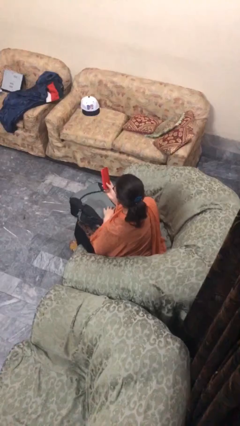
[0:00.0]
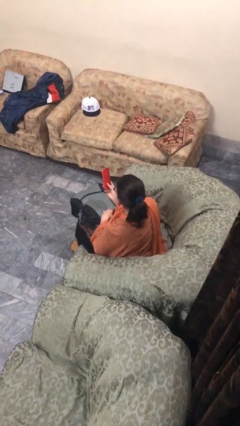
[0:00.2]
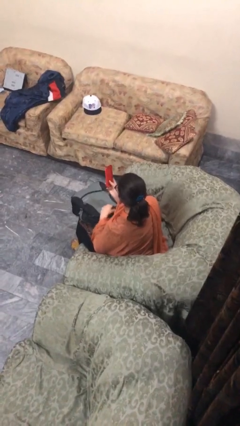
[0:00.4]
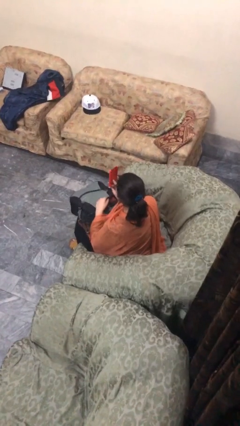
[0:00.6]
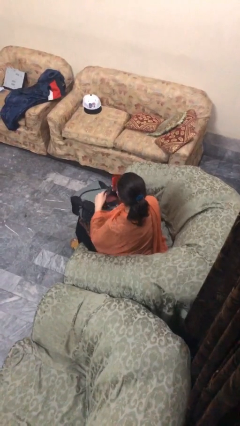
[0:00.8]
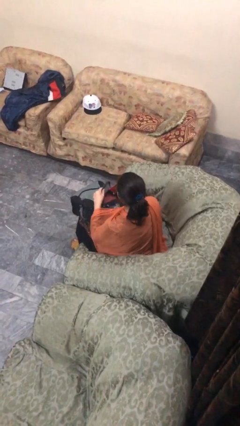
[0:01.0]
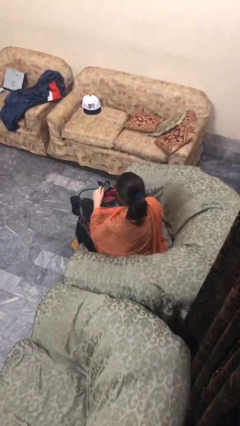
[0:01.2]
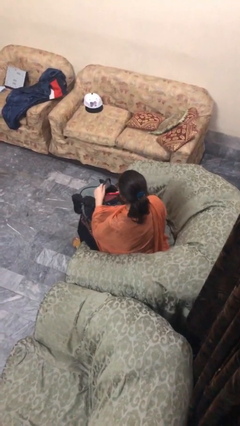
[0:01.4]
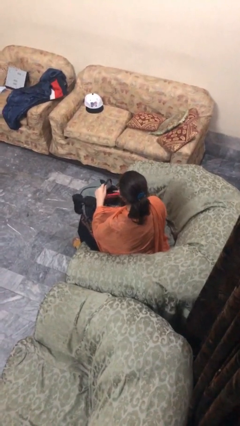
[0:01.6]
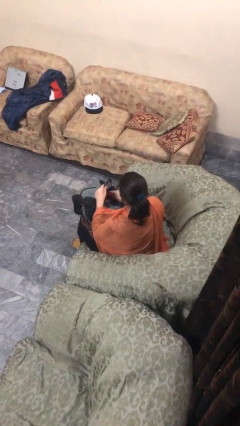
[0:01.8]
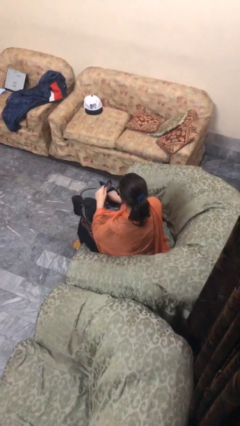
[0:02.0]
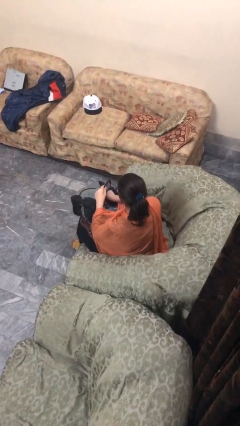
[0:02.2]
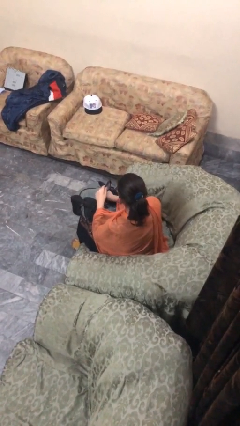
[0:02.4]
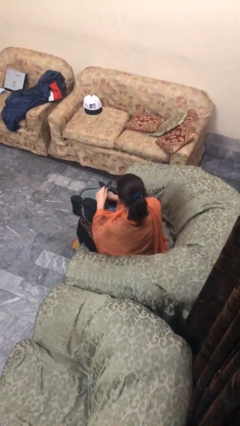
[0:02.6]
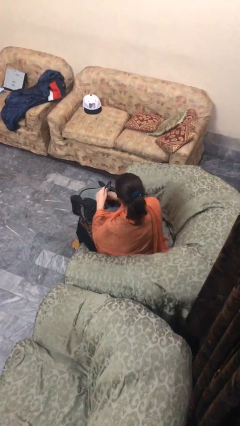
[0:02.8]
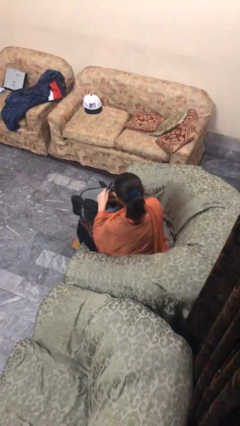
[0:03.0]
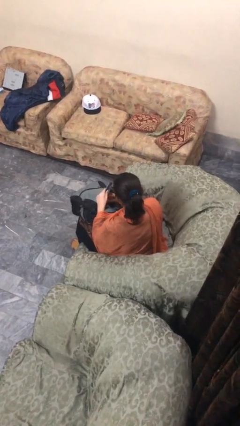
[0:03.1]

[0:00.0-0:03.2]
person puts object into backpack

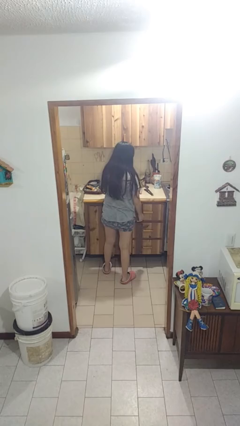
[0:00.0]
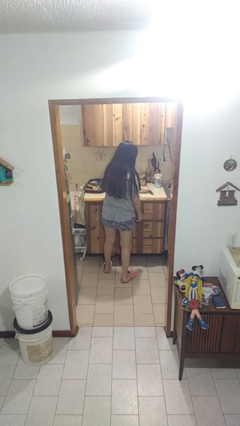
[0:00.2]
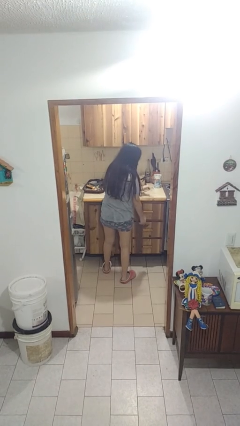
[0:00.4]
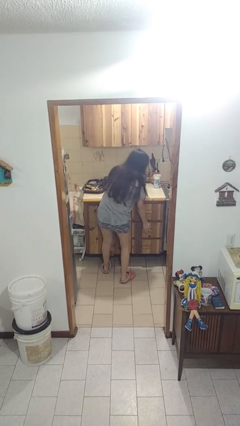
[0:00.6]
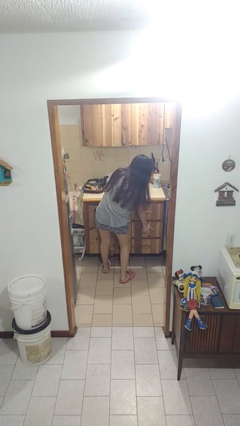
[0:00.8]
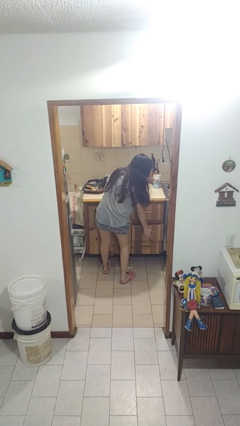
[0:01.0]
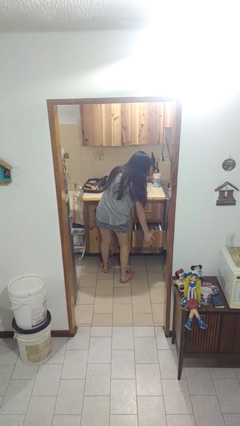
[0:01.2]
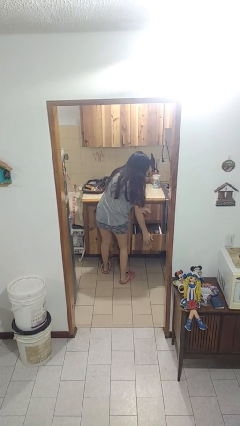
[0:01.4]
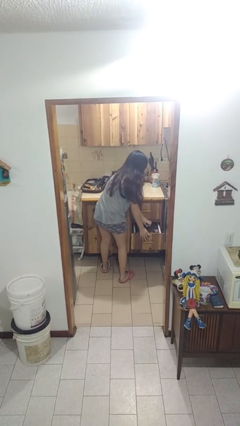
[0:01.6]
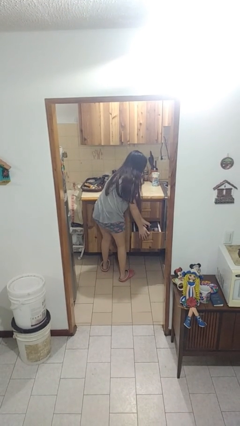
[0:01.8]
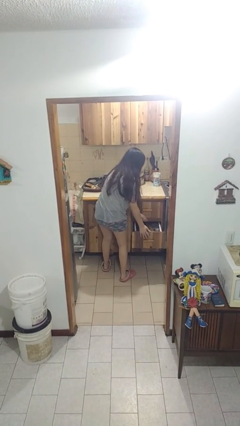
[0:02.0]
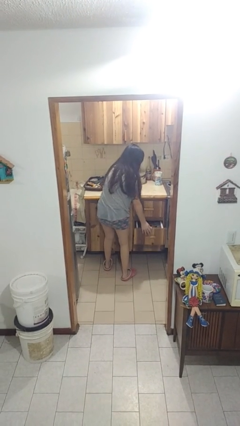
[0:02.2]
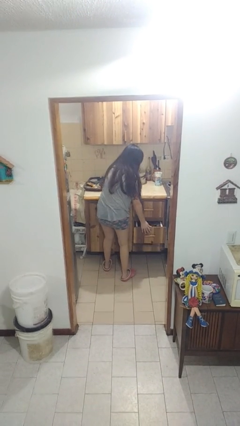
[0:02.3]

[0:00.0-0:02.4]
person puts object into kitchen drawer

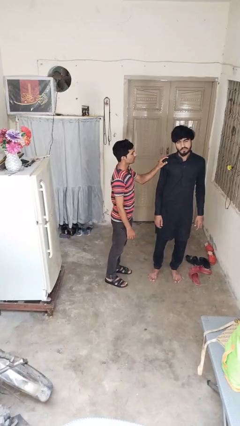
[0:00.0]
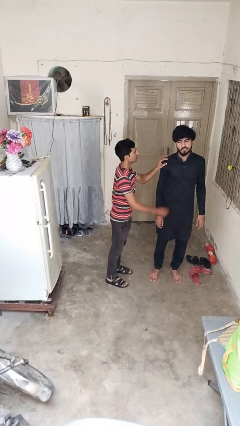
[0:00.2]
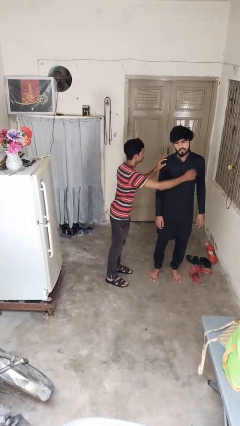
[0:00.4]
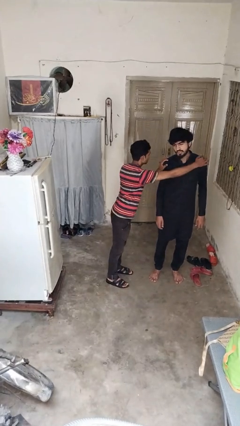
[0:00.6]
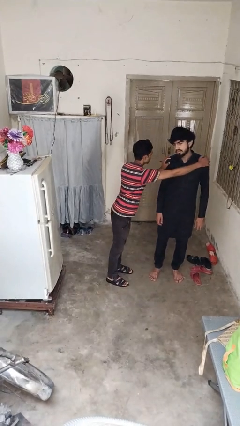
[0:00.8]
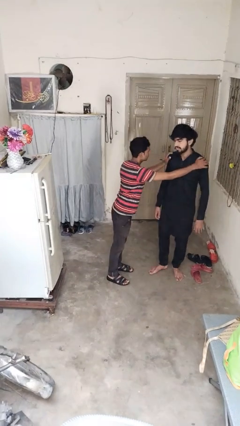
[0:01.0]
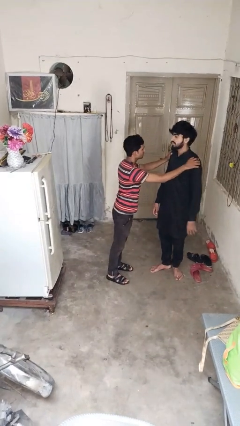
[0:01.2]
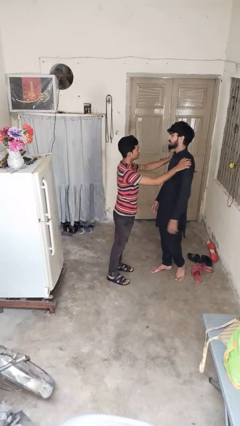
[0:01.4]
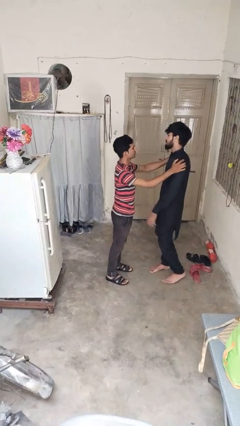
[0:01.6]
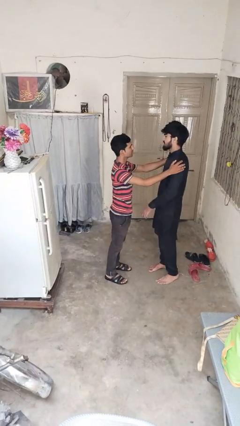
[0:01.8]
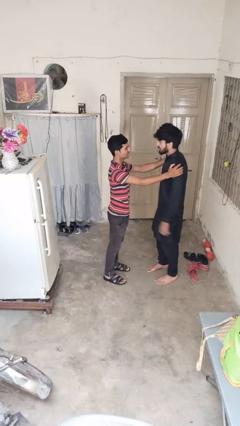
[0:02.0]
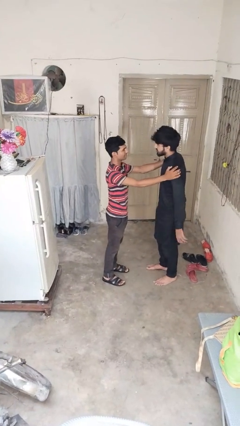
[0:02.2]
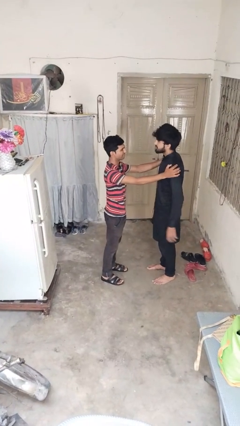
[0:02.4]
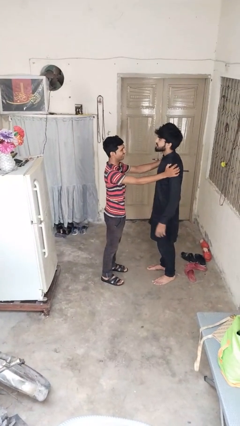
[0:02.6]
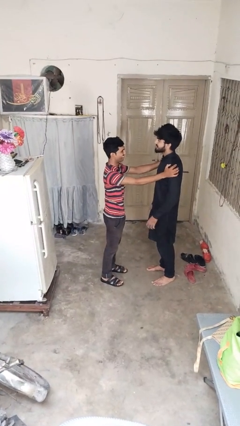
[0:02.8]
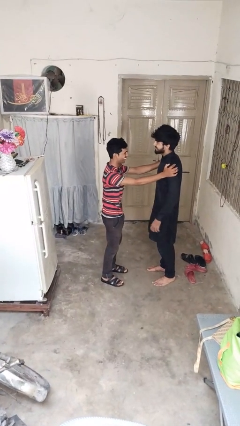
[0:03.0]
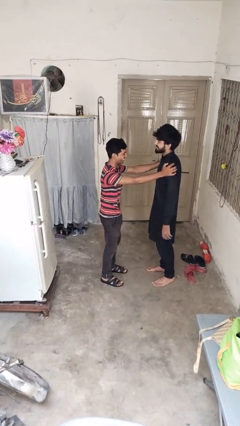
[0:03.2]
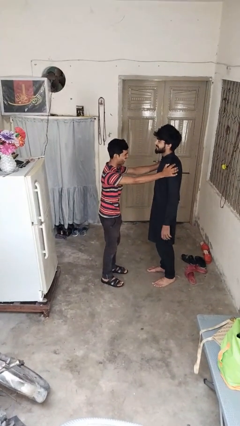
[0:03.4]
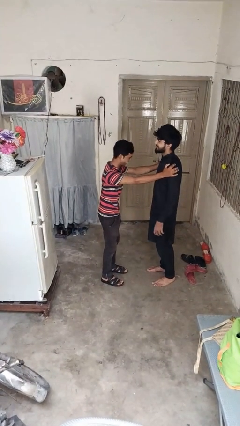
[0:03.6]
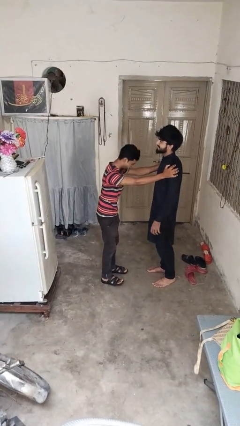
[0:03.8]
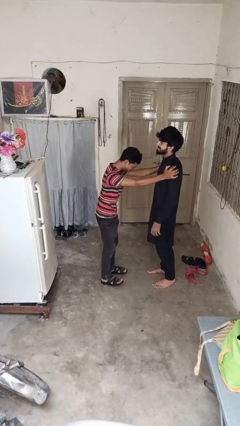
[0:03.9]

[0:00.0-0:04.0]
person spins person around

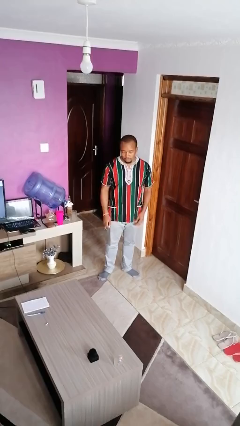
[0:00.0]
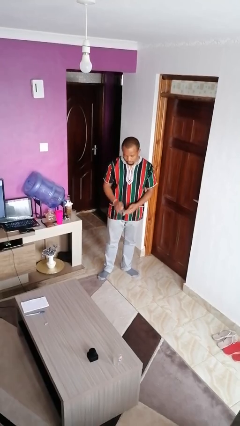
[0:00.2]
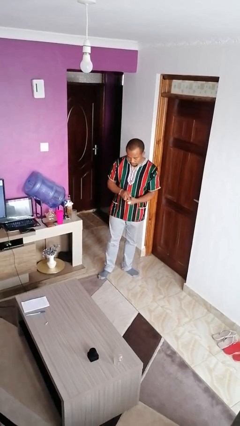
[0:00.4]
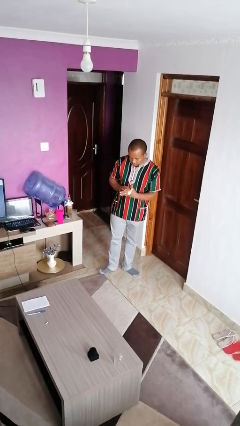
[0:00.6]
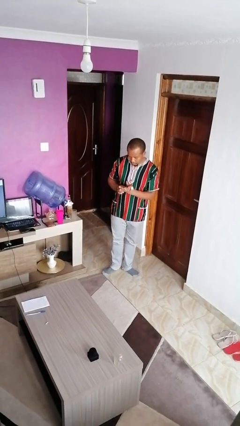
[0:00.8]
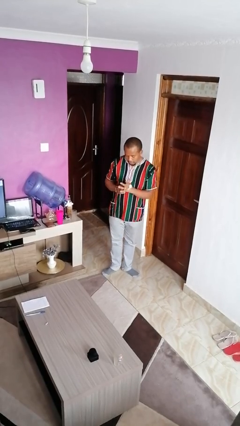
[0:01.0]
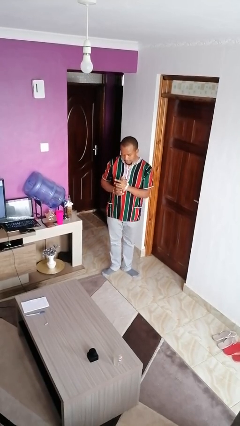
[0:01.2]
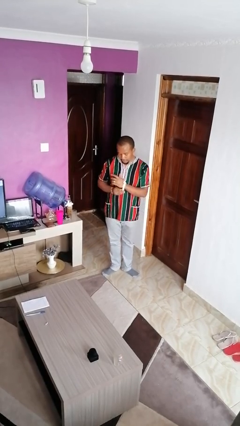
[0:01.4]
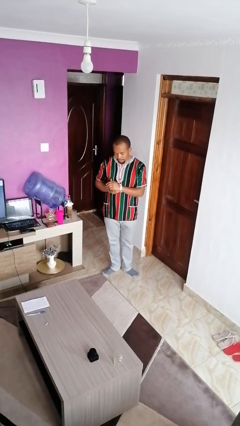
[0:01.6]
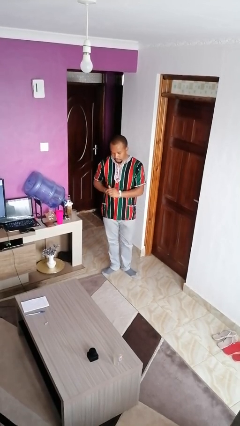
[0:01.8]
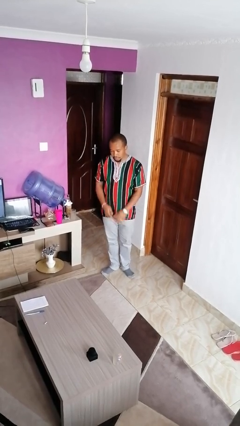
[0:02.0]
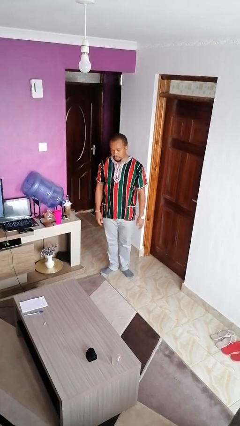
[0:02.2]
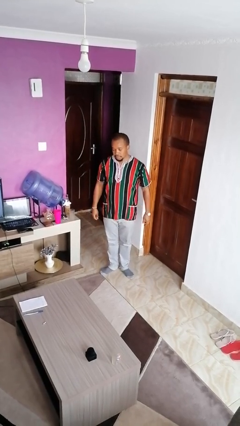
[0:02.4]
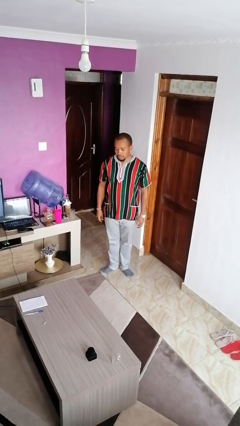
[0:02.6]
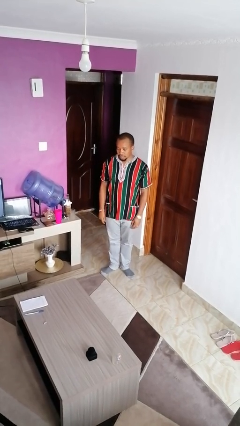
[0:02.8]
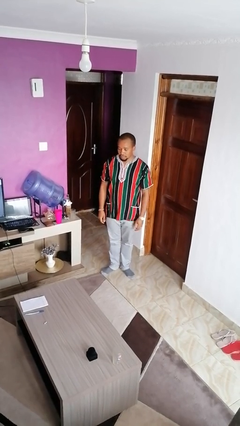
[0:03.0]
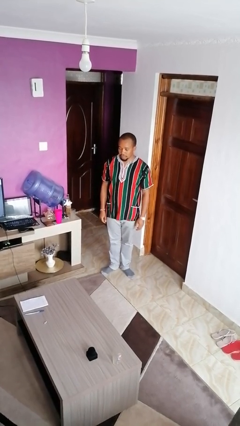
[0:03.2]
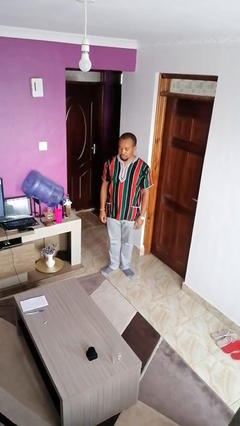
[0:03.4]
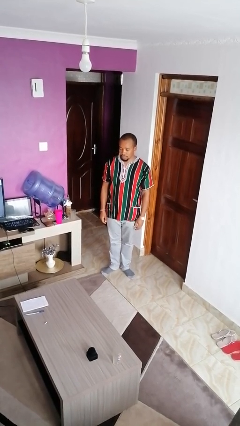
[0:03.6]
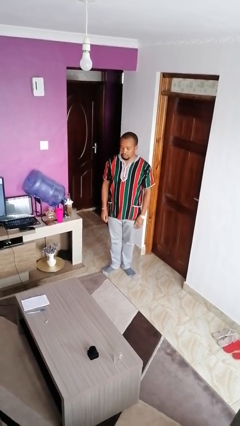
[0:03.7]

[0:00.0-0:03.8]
person puts on wristwatch

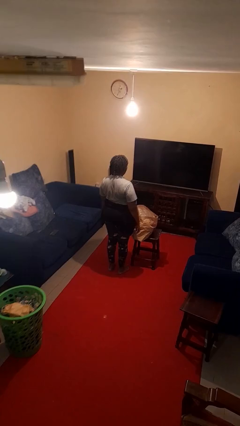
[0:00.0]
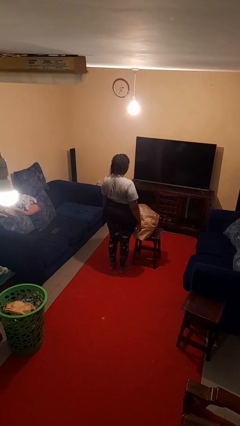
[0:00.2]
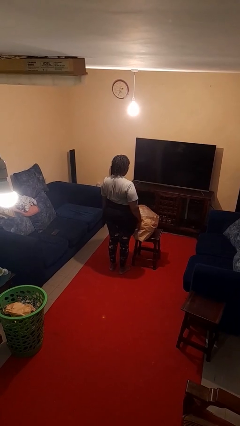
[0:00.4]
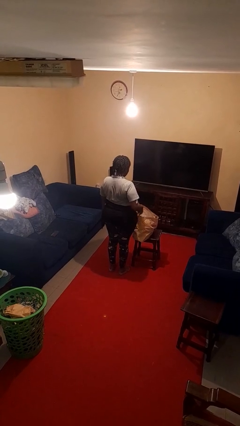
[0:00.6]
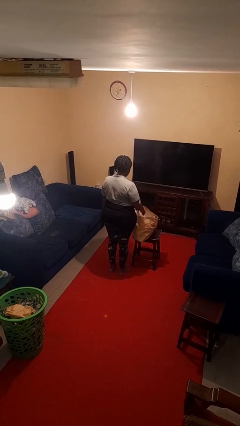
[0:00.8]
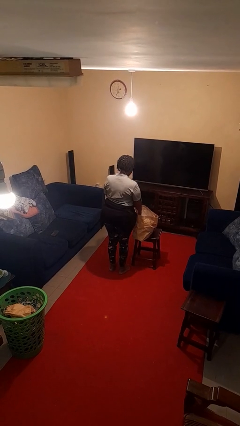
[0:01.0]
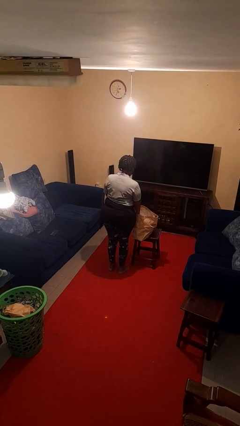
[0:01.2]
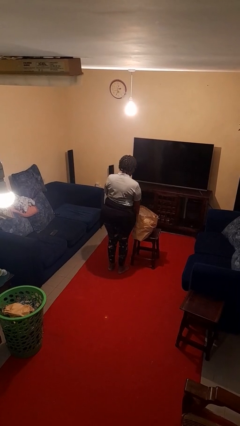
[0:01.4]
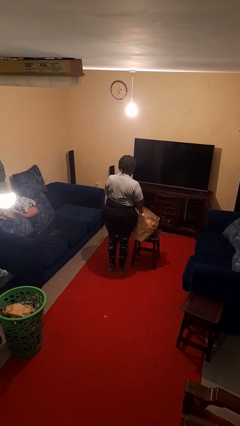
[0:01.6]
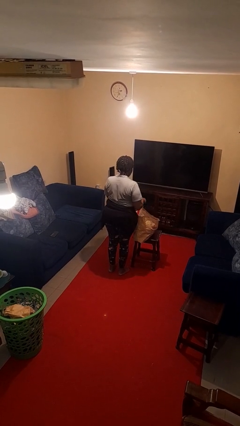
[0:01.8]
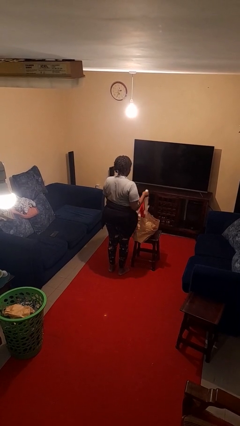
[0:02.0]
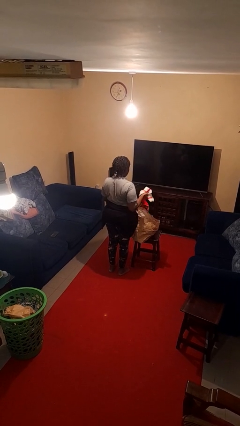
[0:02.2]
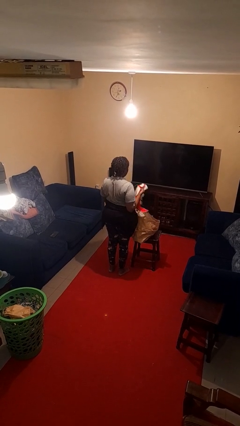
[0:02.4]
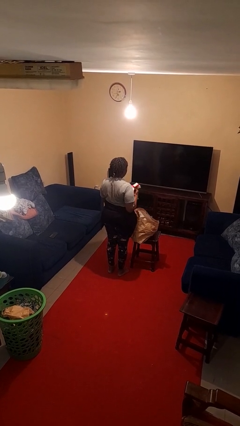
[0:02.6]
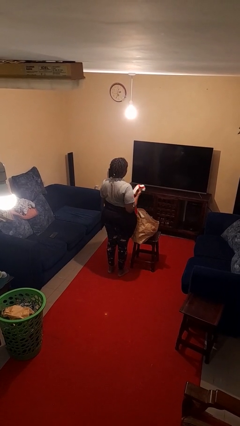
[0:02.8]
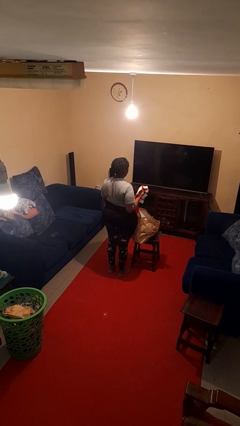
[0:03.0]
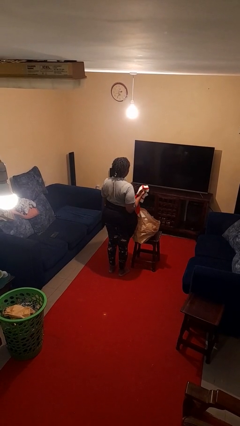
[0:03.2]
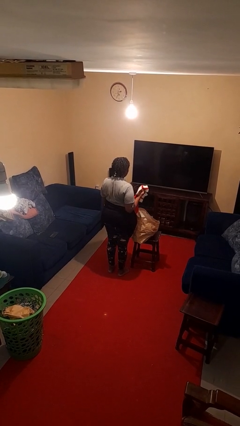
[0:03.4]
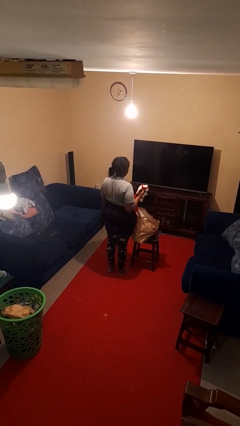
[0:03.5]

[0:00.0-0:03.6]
person takes object from bag

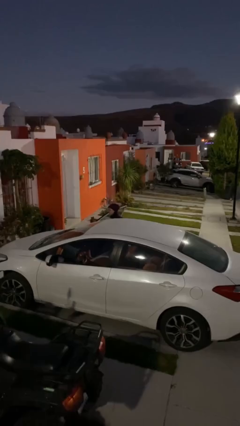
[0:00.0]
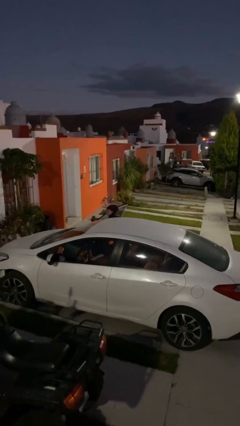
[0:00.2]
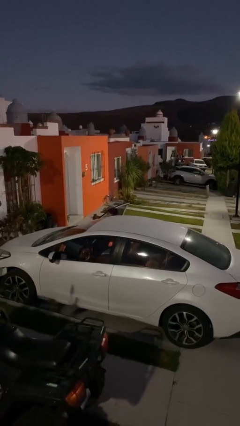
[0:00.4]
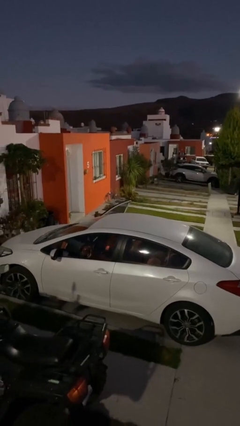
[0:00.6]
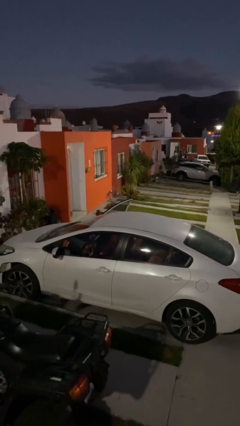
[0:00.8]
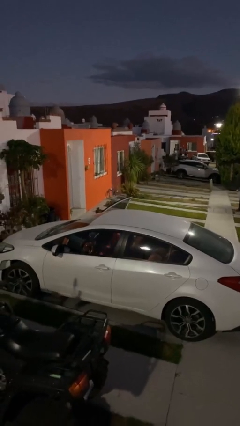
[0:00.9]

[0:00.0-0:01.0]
person enters car
